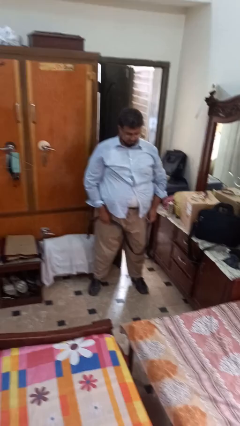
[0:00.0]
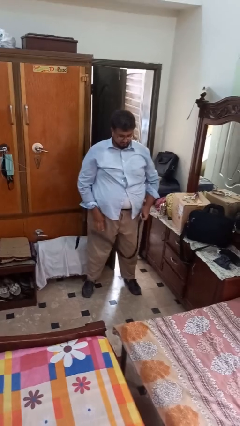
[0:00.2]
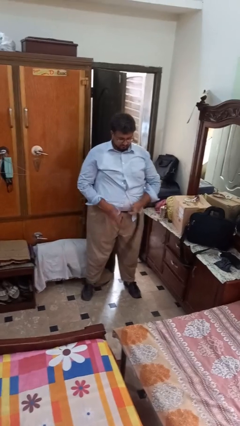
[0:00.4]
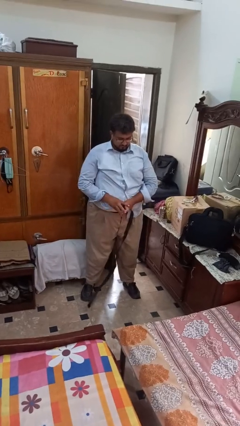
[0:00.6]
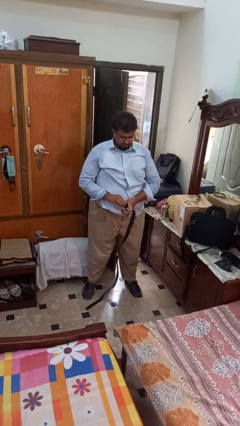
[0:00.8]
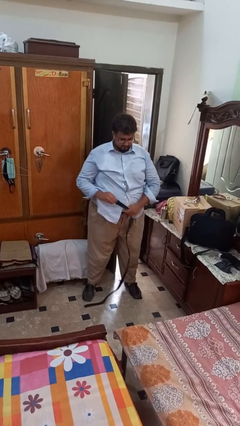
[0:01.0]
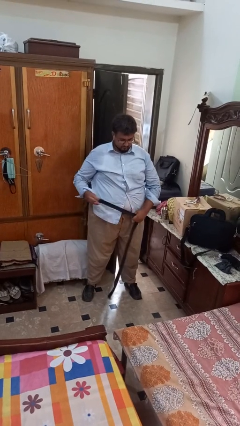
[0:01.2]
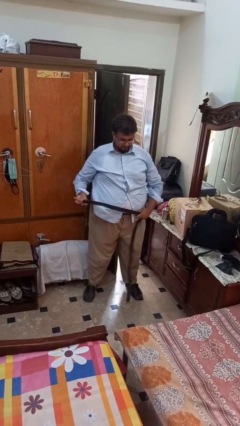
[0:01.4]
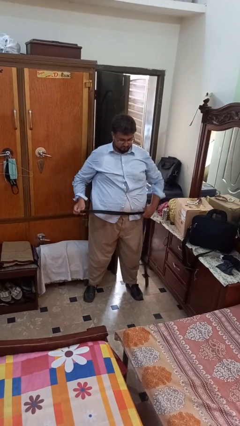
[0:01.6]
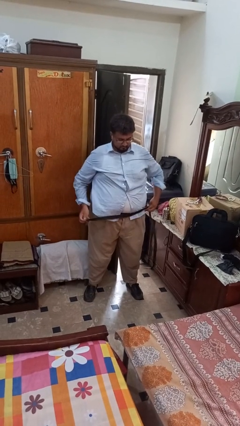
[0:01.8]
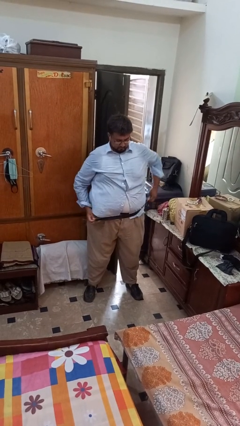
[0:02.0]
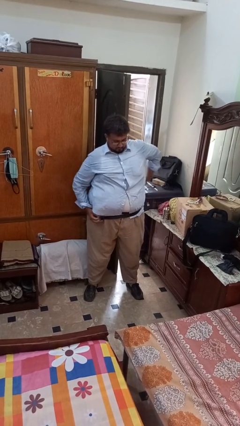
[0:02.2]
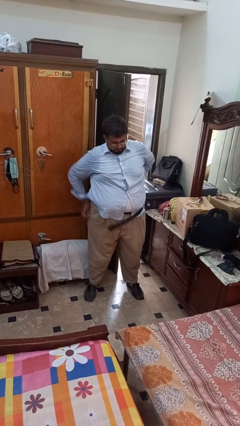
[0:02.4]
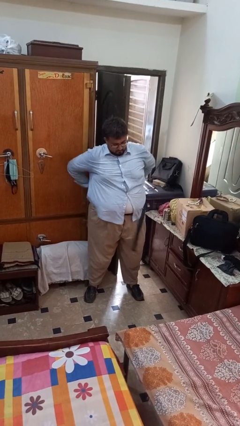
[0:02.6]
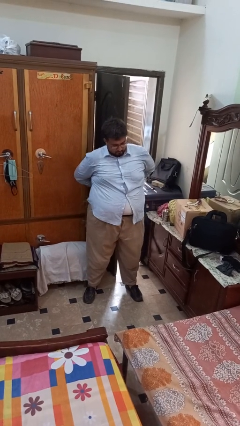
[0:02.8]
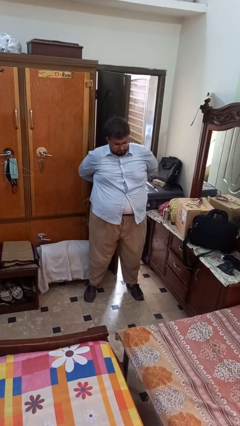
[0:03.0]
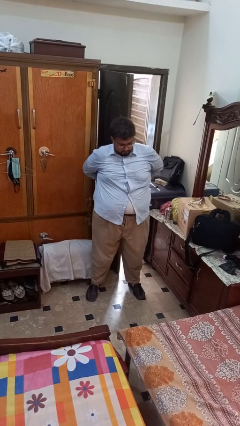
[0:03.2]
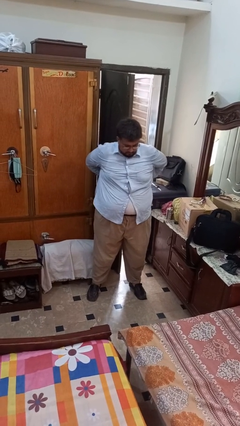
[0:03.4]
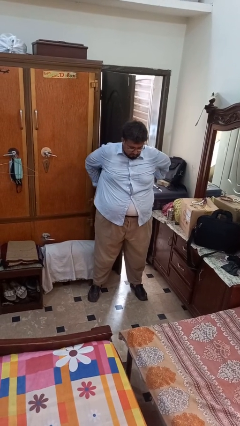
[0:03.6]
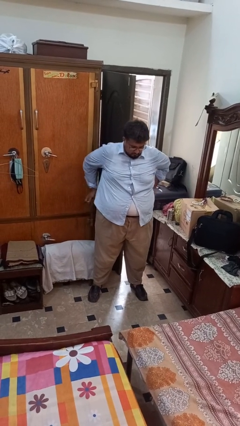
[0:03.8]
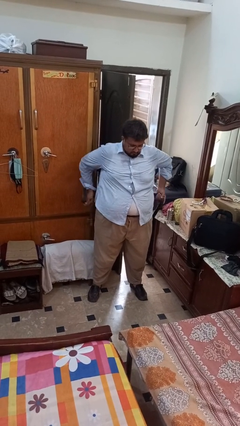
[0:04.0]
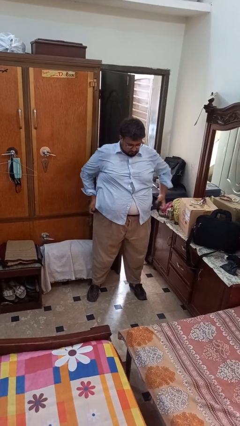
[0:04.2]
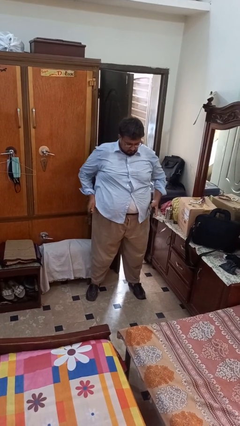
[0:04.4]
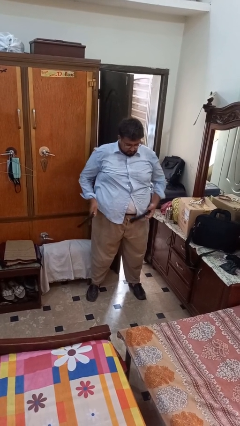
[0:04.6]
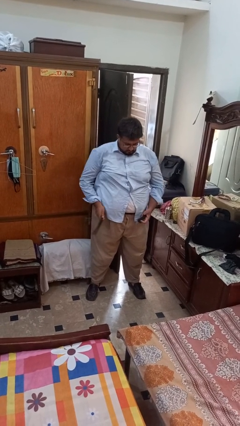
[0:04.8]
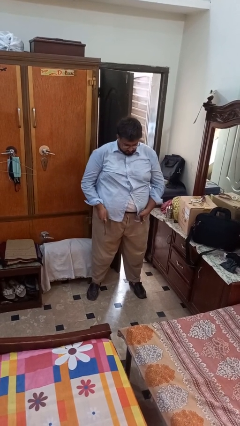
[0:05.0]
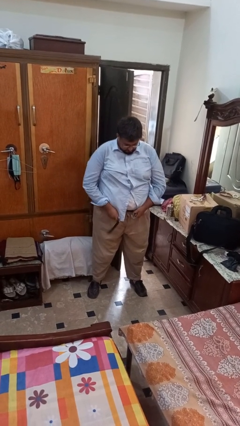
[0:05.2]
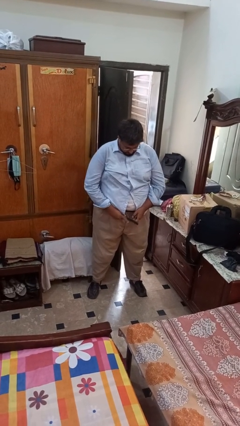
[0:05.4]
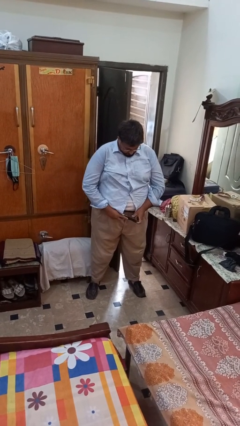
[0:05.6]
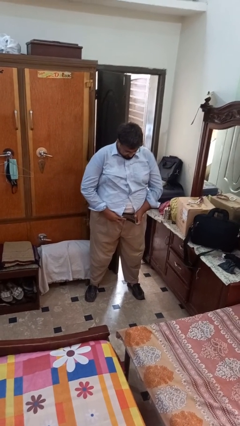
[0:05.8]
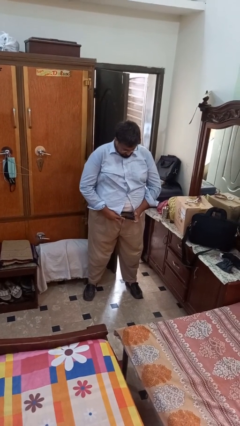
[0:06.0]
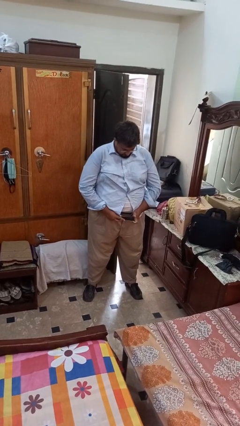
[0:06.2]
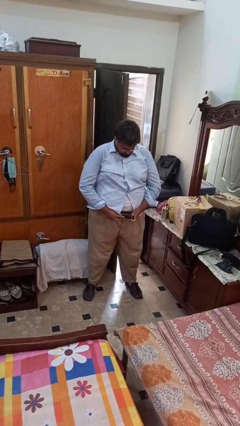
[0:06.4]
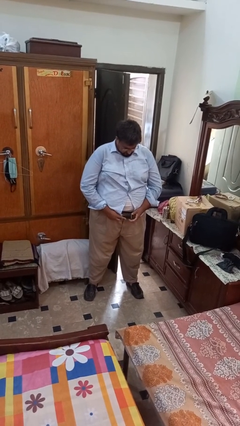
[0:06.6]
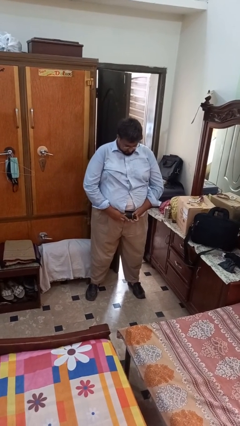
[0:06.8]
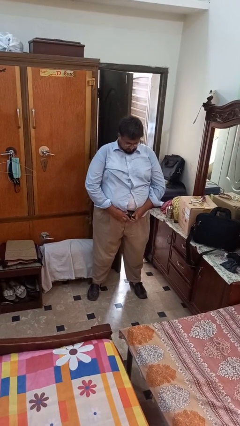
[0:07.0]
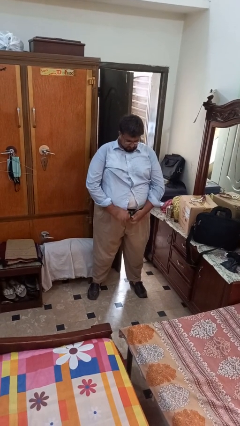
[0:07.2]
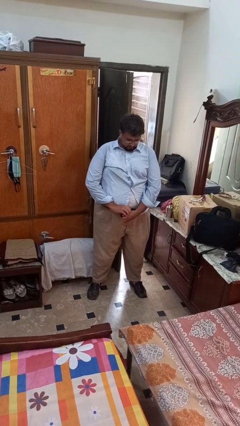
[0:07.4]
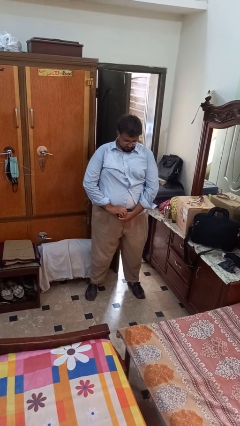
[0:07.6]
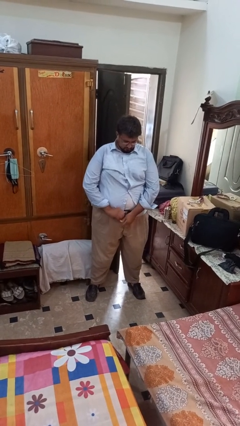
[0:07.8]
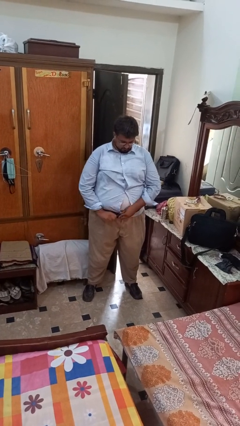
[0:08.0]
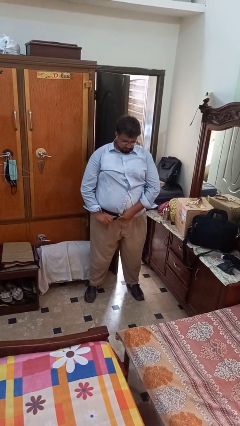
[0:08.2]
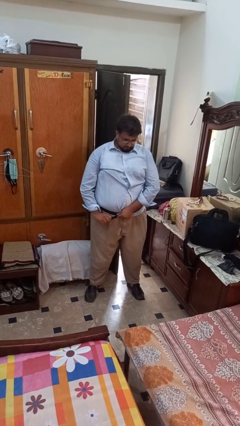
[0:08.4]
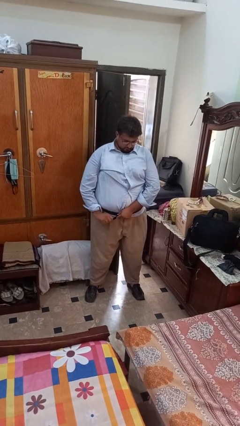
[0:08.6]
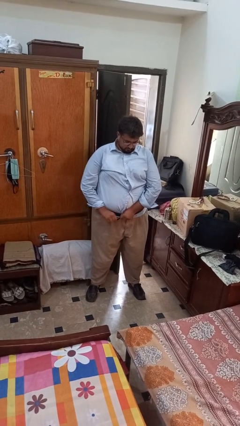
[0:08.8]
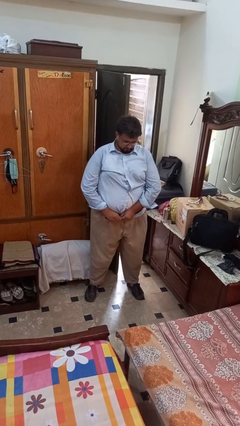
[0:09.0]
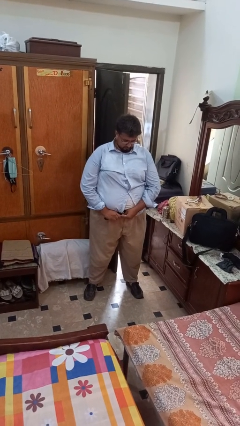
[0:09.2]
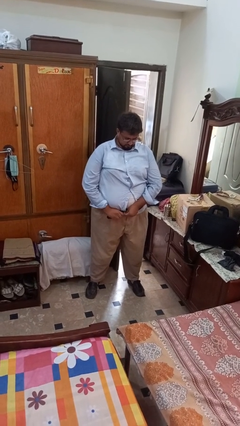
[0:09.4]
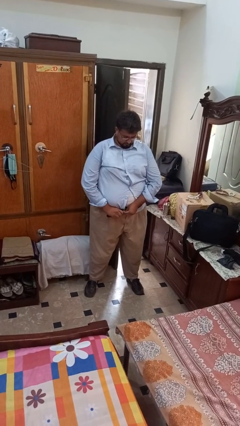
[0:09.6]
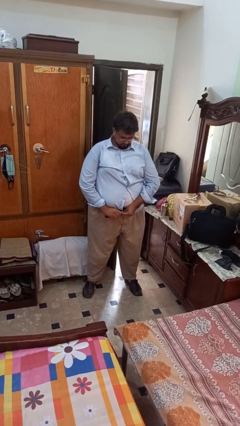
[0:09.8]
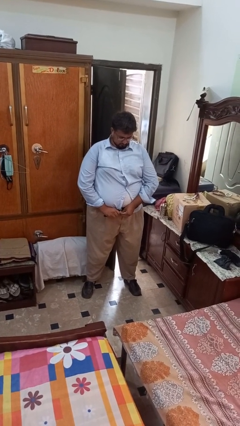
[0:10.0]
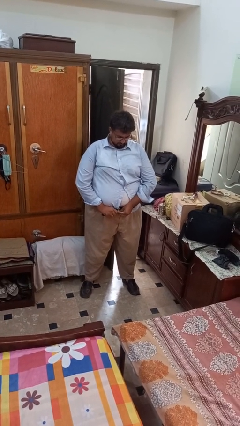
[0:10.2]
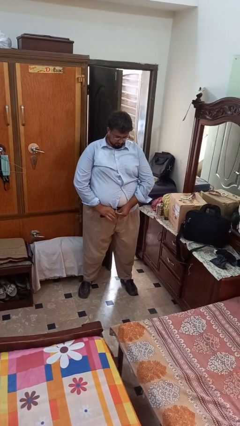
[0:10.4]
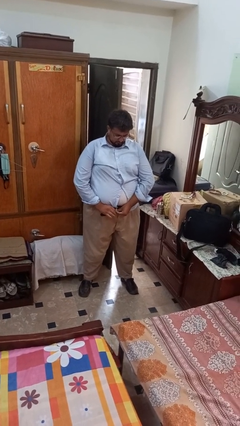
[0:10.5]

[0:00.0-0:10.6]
person puts on belt

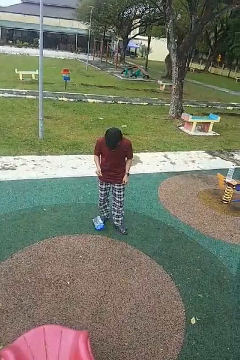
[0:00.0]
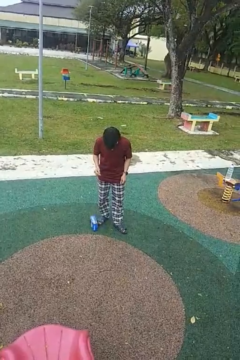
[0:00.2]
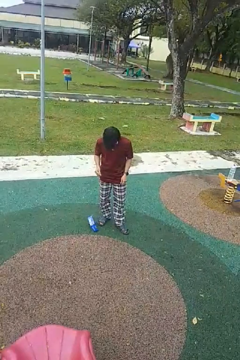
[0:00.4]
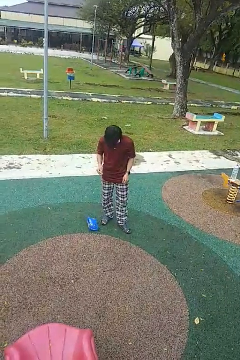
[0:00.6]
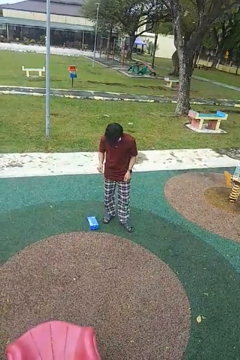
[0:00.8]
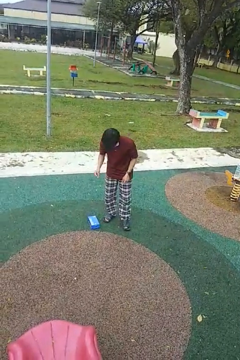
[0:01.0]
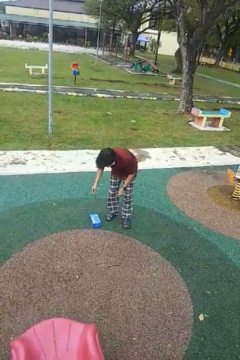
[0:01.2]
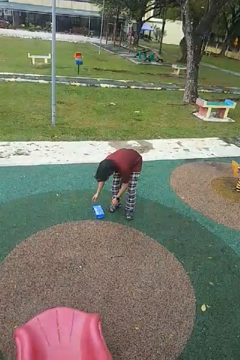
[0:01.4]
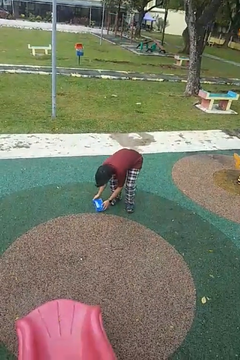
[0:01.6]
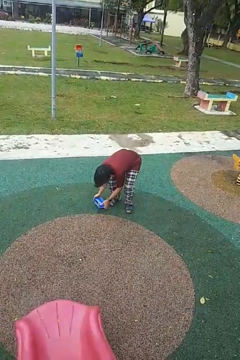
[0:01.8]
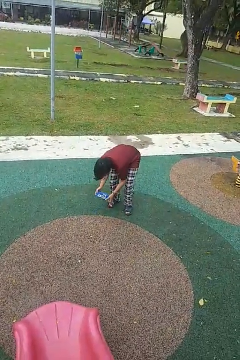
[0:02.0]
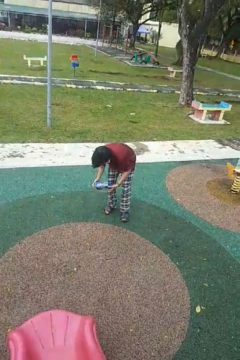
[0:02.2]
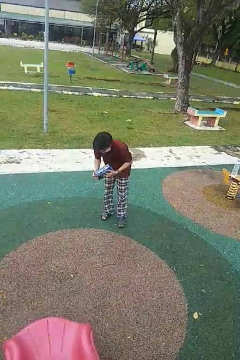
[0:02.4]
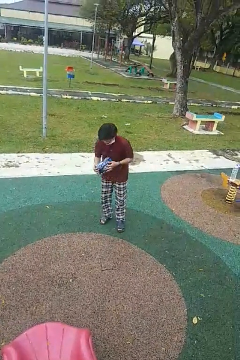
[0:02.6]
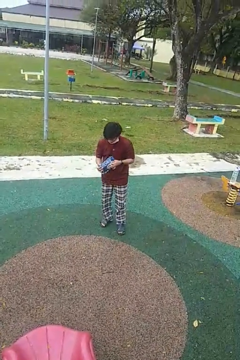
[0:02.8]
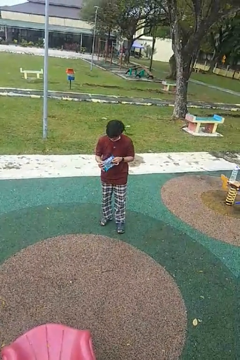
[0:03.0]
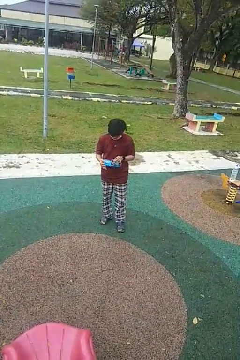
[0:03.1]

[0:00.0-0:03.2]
person picks up object from floor

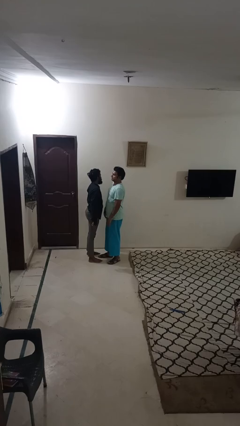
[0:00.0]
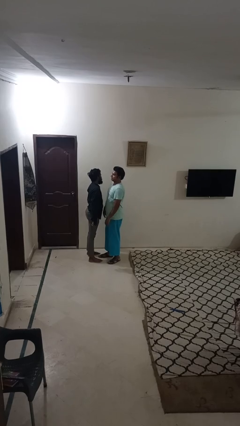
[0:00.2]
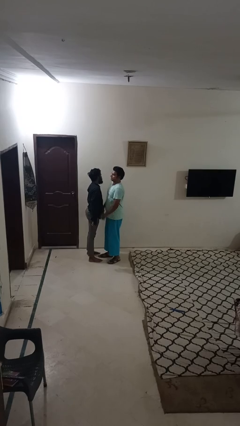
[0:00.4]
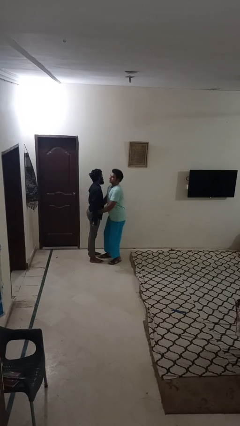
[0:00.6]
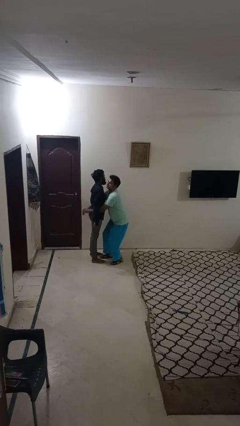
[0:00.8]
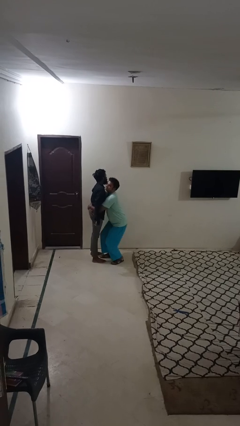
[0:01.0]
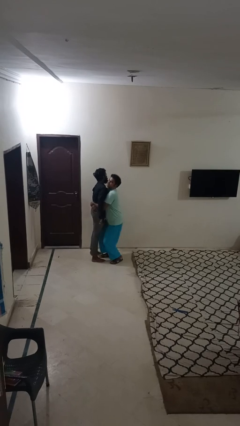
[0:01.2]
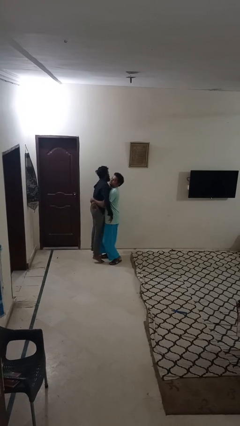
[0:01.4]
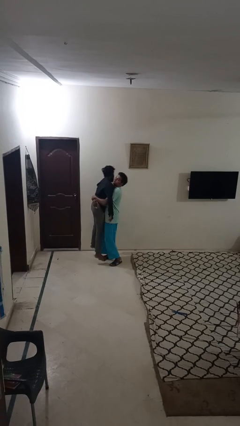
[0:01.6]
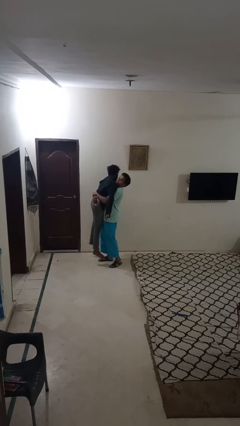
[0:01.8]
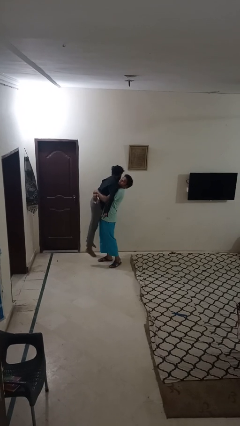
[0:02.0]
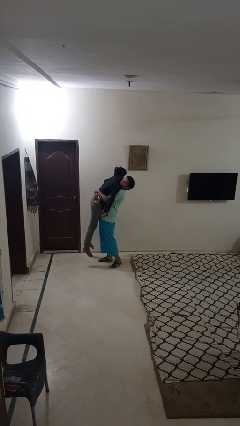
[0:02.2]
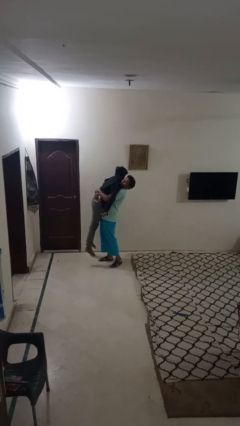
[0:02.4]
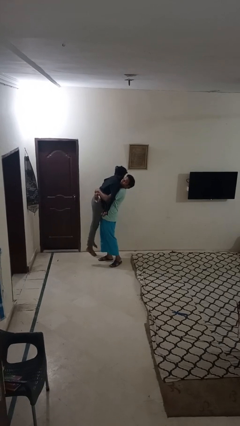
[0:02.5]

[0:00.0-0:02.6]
person picks up person

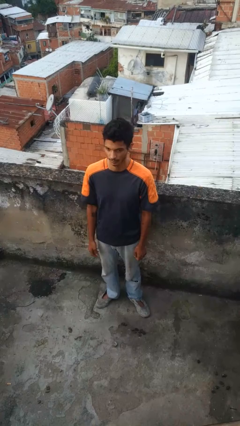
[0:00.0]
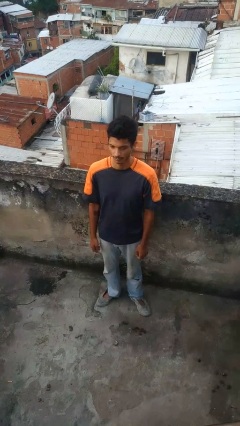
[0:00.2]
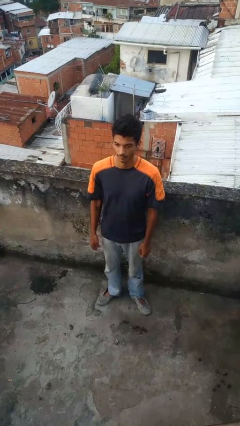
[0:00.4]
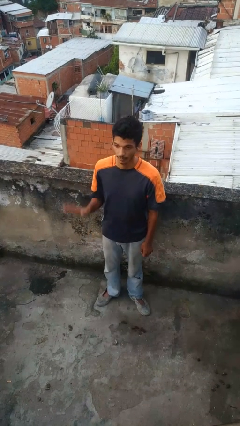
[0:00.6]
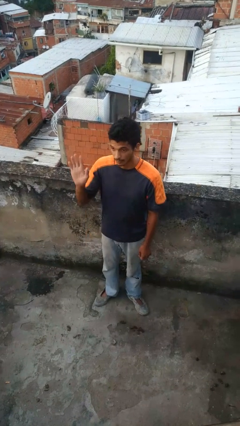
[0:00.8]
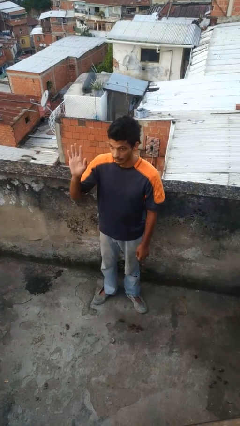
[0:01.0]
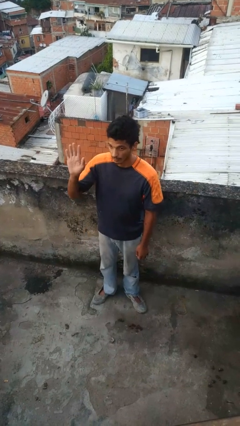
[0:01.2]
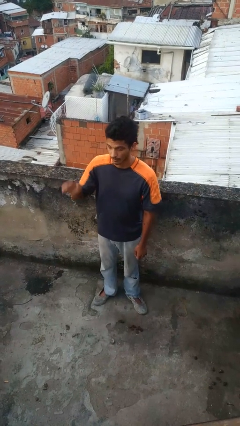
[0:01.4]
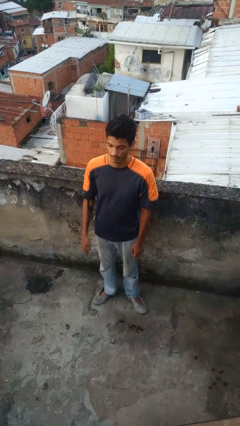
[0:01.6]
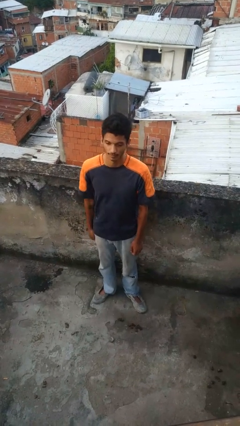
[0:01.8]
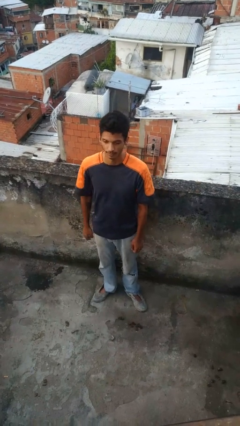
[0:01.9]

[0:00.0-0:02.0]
person gestures number five
